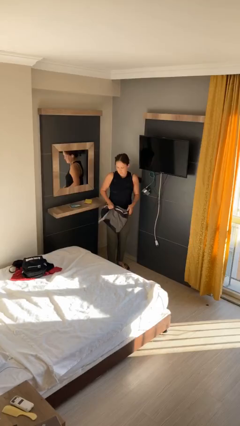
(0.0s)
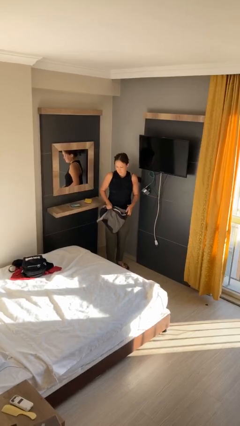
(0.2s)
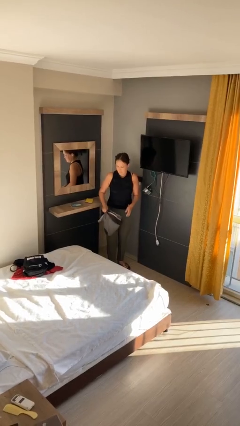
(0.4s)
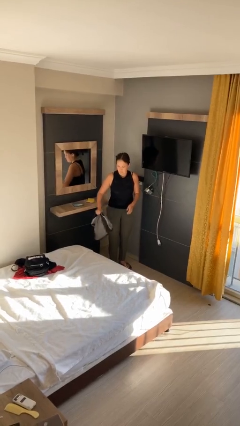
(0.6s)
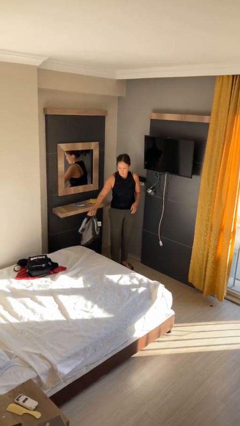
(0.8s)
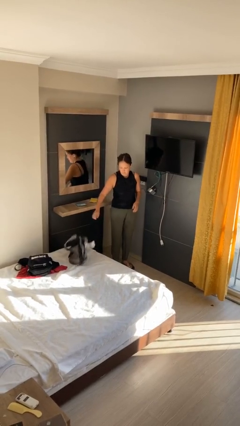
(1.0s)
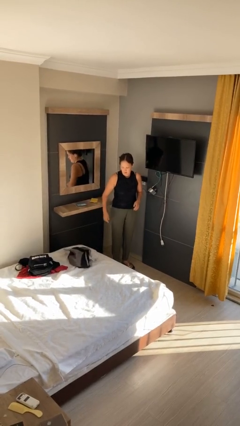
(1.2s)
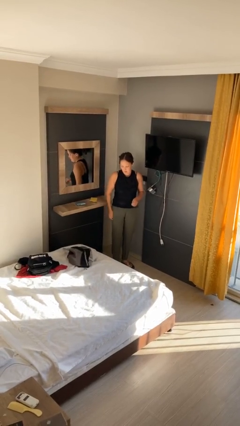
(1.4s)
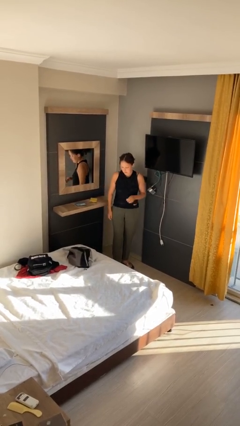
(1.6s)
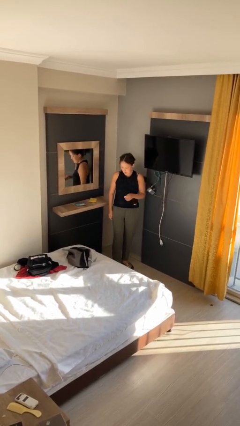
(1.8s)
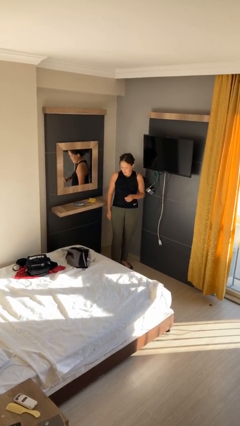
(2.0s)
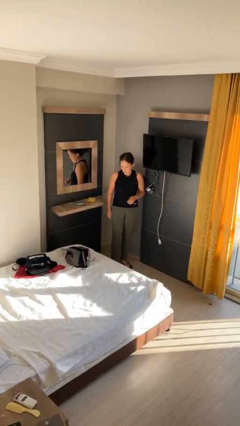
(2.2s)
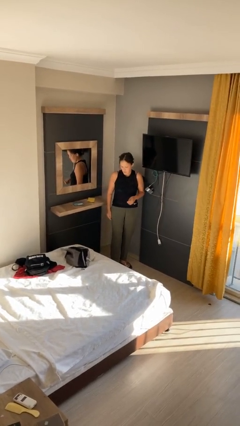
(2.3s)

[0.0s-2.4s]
person throws object on bed

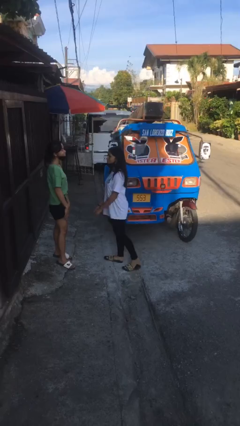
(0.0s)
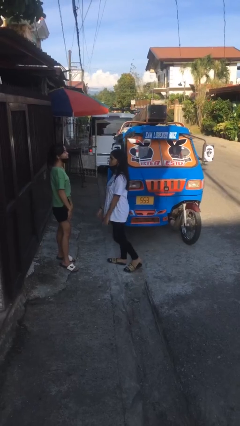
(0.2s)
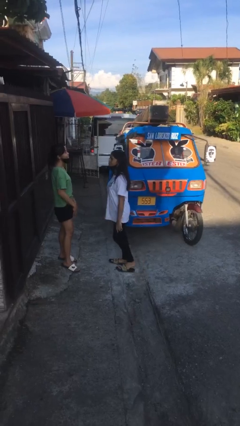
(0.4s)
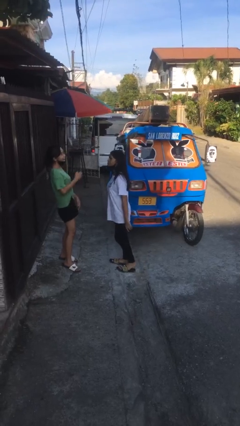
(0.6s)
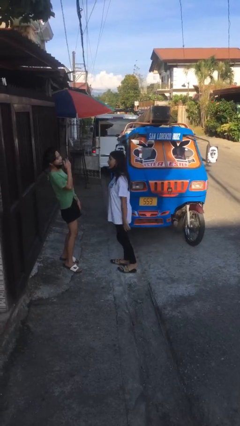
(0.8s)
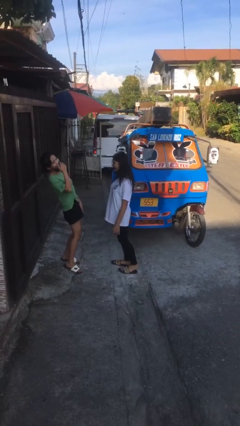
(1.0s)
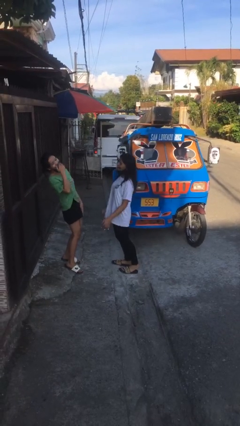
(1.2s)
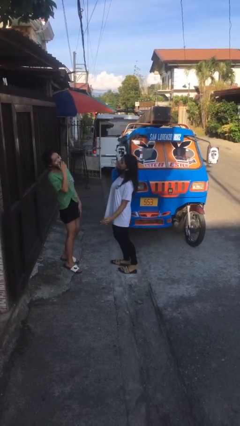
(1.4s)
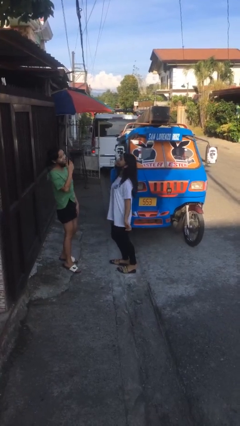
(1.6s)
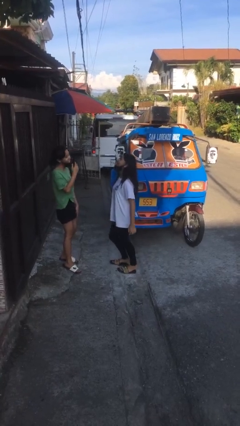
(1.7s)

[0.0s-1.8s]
person laughs with person

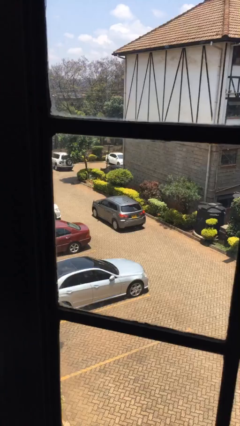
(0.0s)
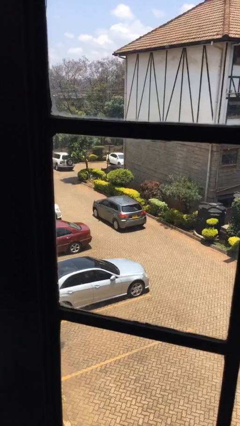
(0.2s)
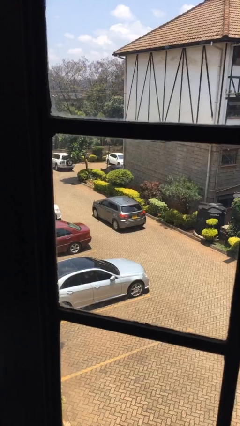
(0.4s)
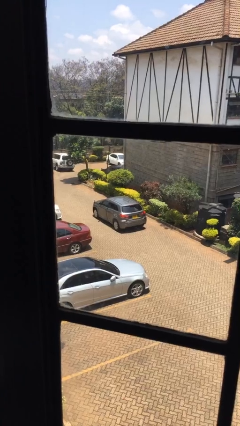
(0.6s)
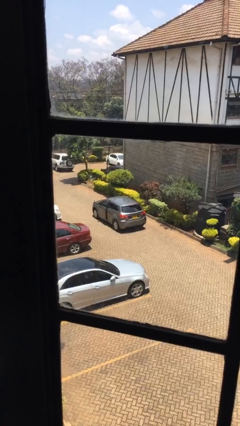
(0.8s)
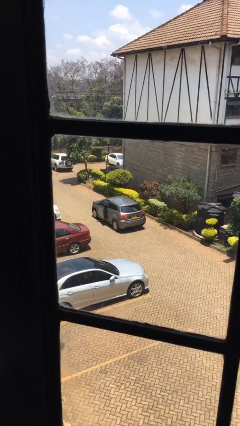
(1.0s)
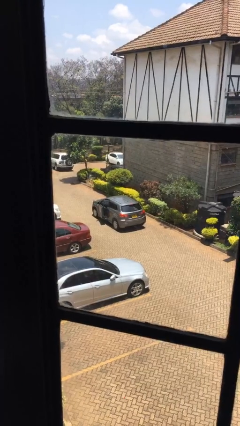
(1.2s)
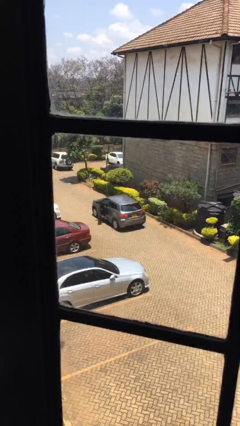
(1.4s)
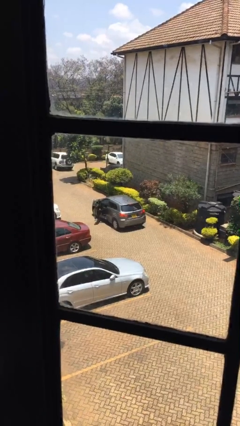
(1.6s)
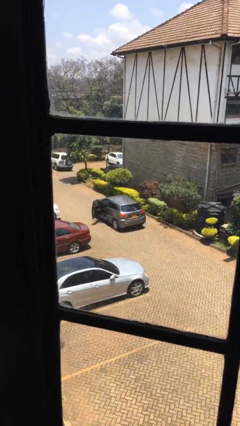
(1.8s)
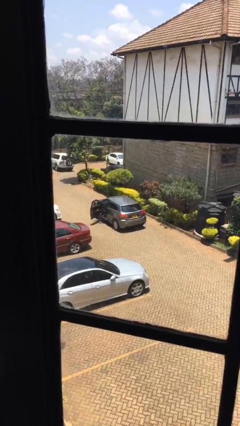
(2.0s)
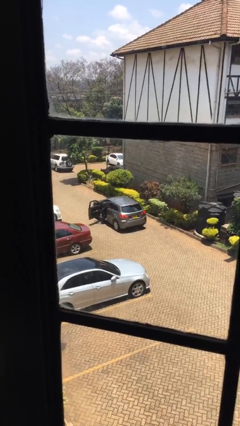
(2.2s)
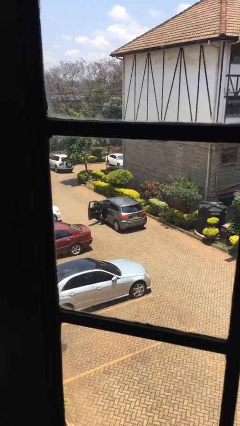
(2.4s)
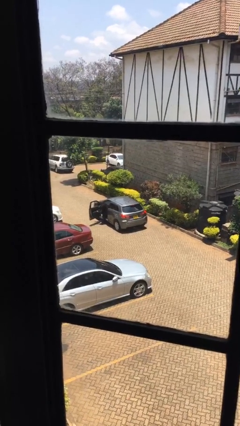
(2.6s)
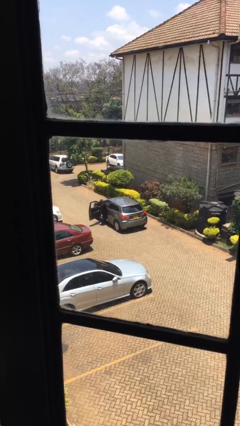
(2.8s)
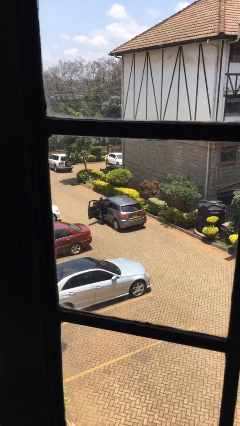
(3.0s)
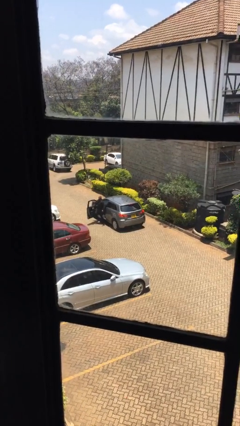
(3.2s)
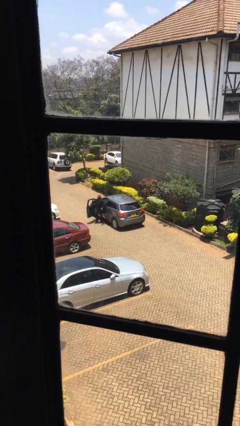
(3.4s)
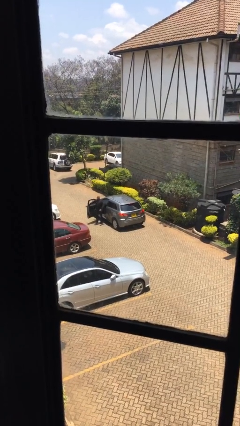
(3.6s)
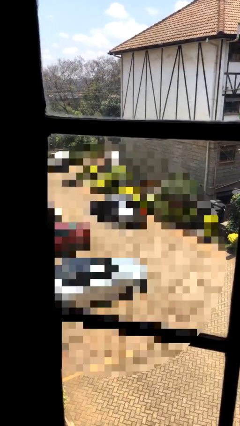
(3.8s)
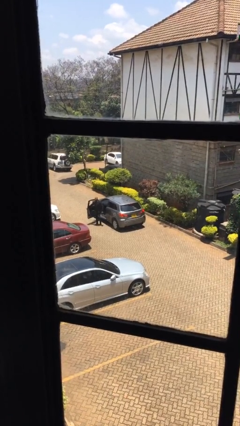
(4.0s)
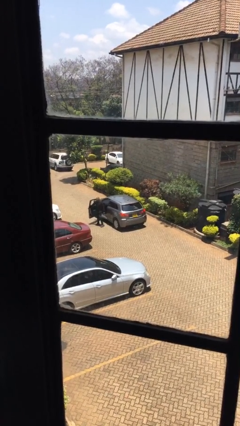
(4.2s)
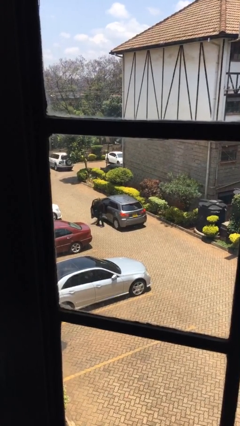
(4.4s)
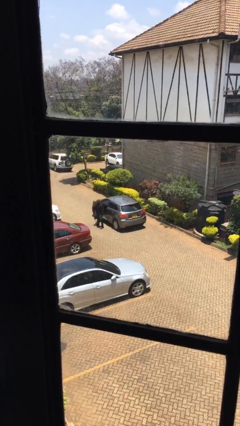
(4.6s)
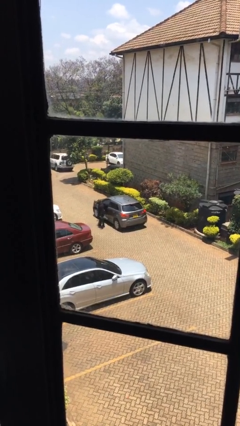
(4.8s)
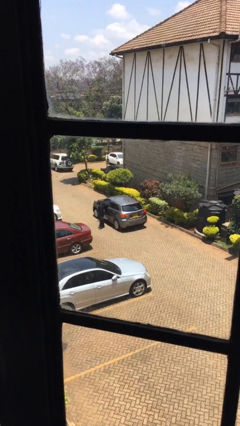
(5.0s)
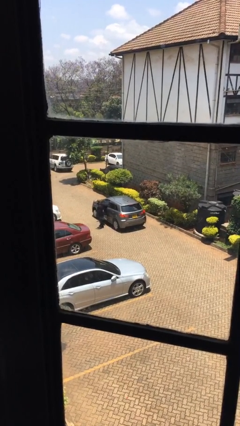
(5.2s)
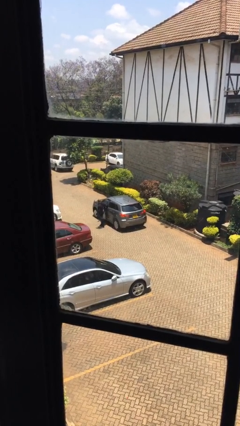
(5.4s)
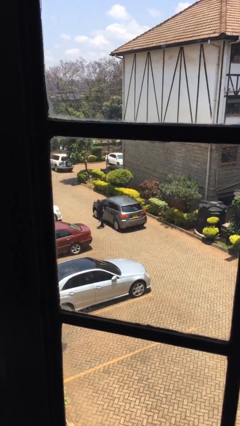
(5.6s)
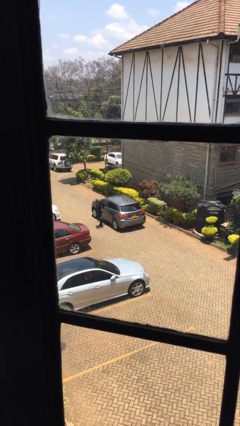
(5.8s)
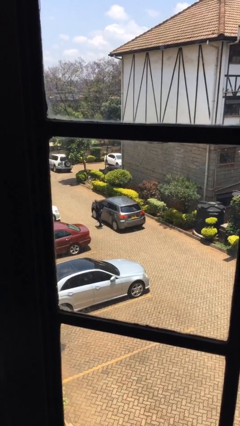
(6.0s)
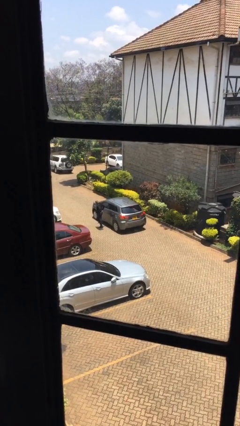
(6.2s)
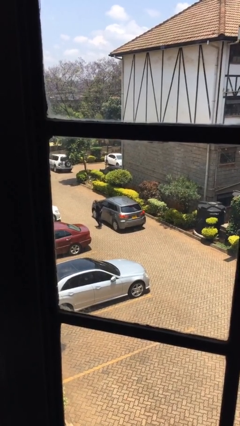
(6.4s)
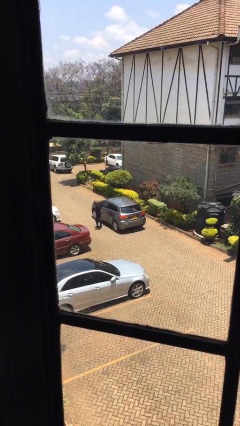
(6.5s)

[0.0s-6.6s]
car drops off person

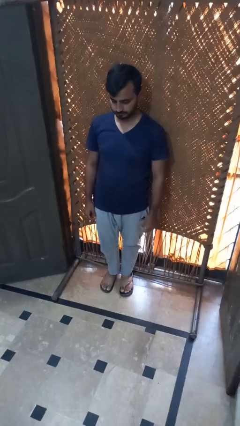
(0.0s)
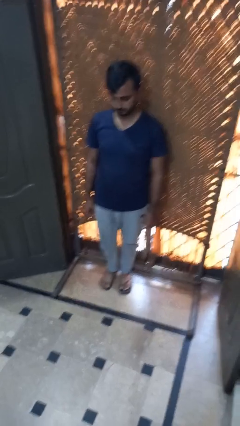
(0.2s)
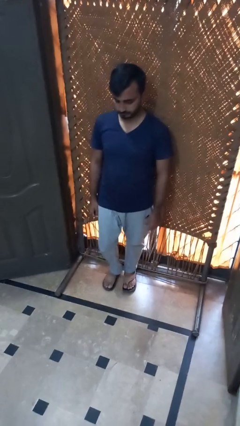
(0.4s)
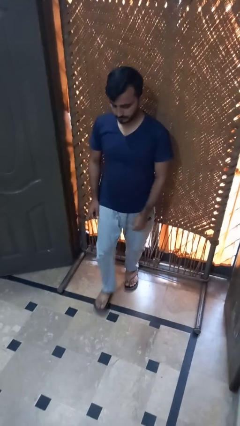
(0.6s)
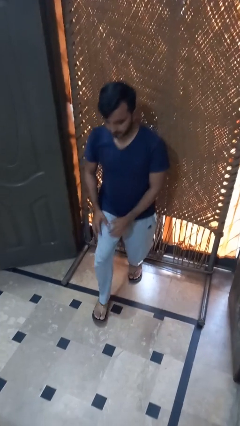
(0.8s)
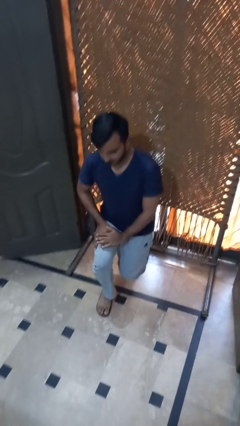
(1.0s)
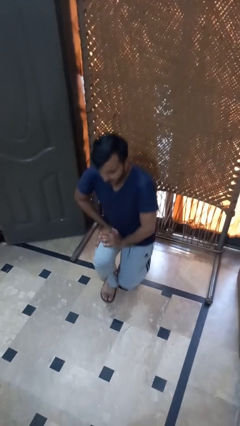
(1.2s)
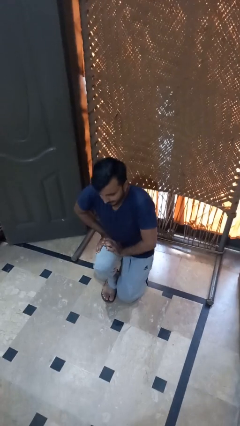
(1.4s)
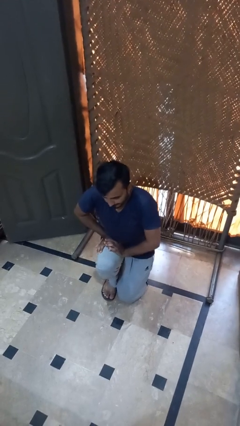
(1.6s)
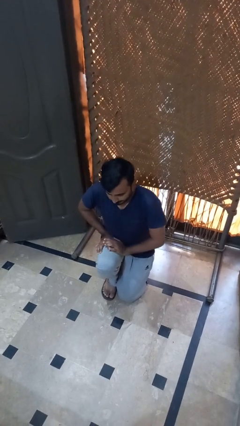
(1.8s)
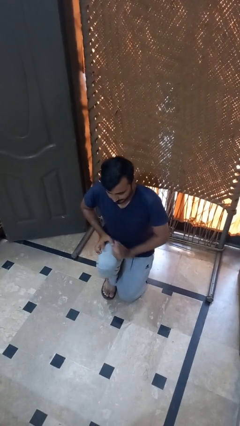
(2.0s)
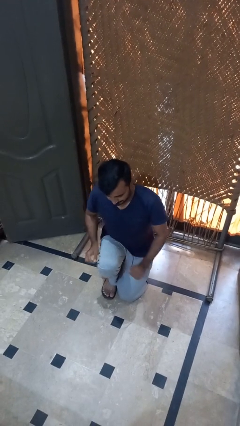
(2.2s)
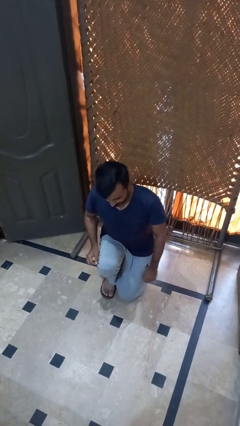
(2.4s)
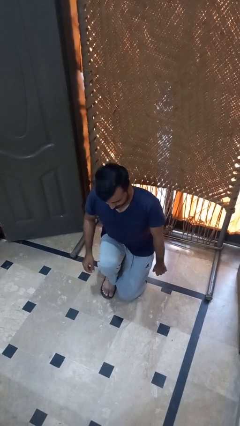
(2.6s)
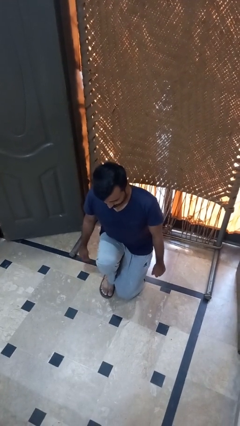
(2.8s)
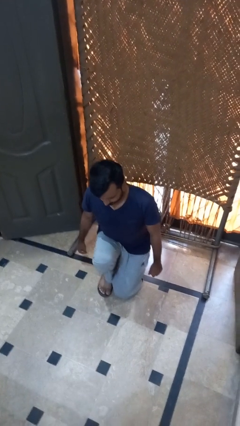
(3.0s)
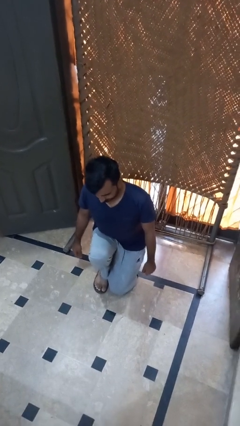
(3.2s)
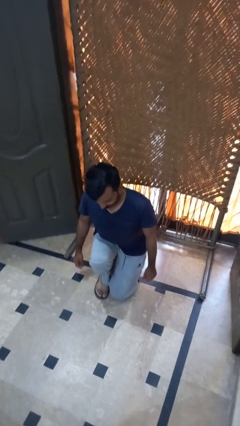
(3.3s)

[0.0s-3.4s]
person exercises with lunges

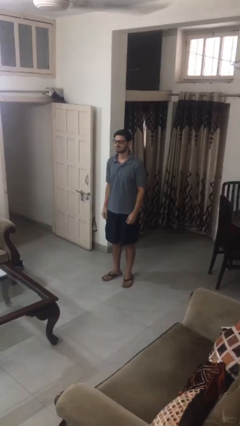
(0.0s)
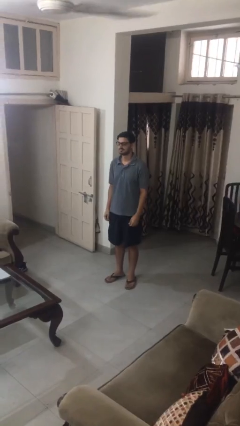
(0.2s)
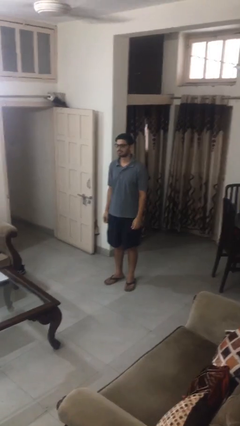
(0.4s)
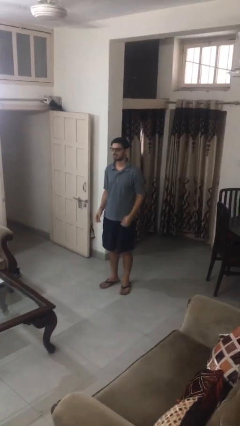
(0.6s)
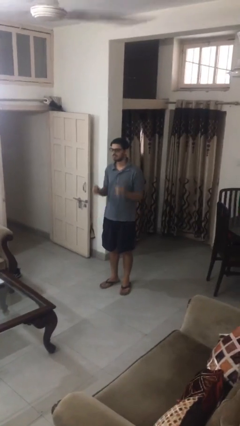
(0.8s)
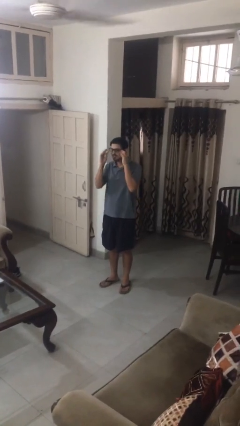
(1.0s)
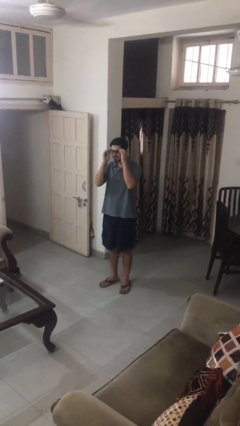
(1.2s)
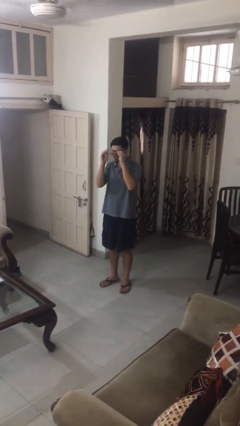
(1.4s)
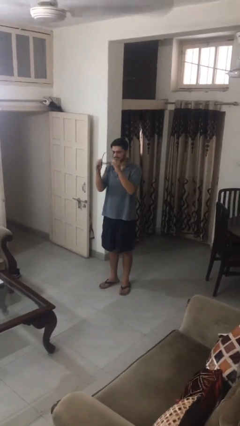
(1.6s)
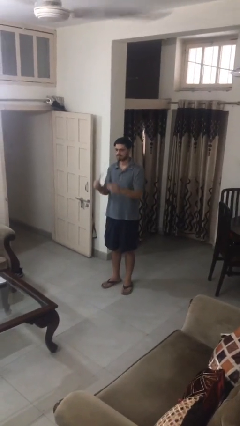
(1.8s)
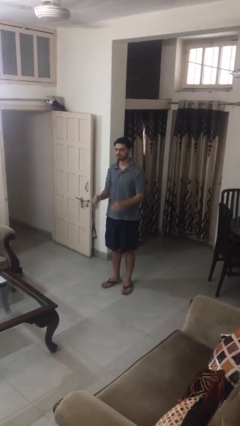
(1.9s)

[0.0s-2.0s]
person takes off glasses

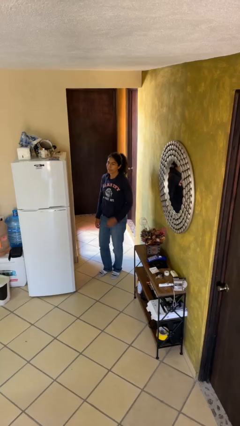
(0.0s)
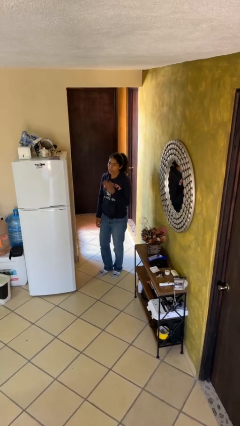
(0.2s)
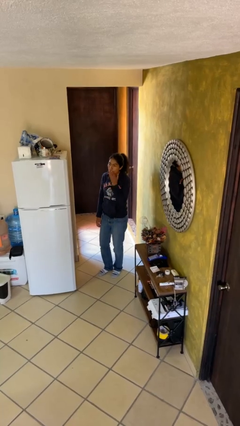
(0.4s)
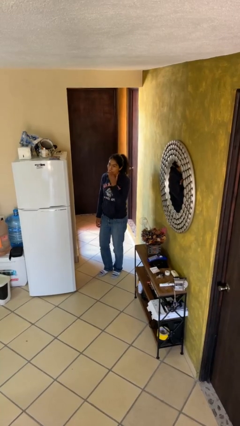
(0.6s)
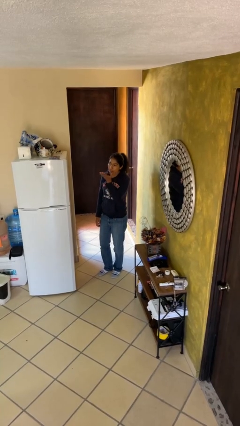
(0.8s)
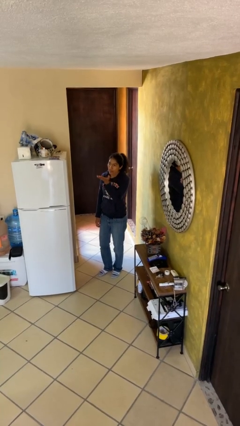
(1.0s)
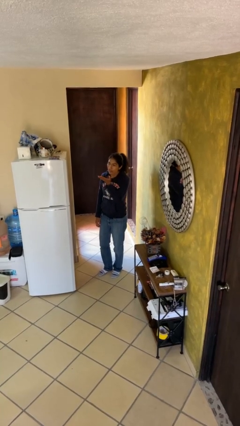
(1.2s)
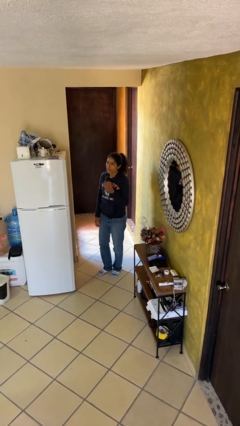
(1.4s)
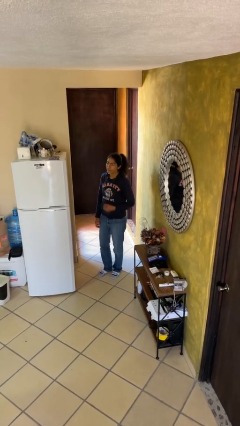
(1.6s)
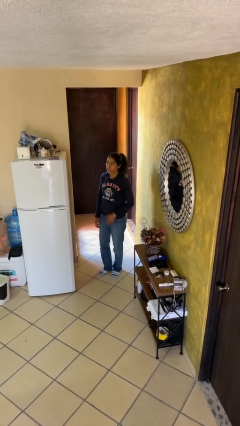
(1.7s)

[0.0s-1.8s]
person gestures blow kiss
